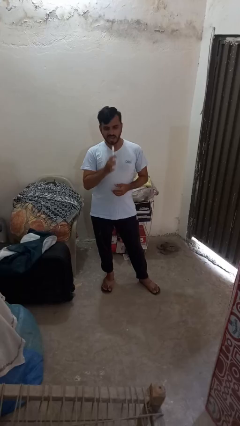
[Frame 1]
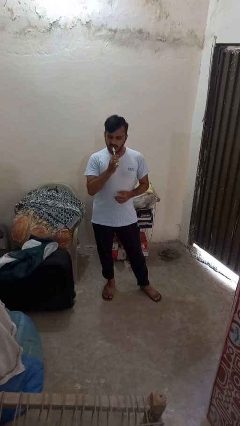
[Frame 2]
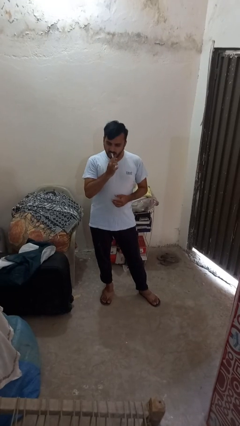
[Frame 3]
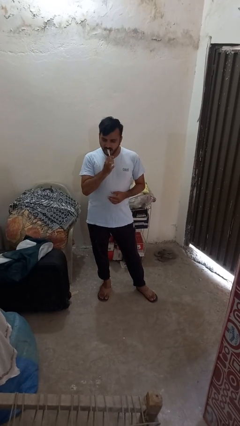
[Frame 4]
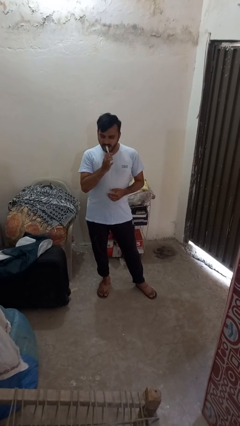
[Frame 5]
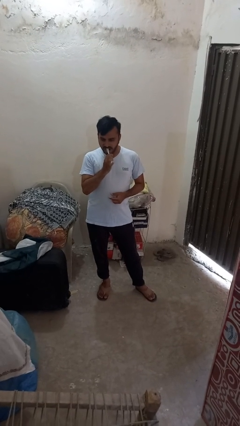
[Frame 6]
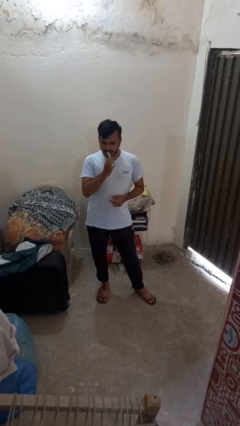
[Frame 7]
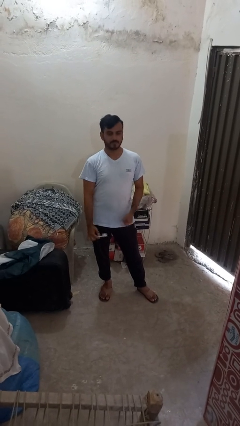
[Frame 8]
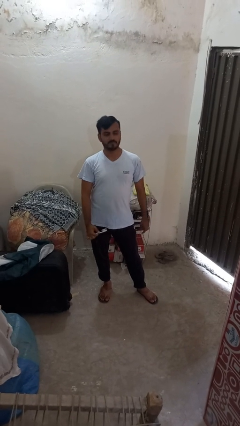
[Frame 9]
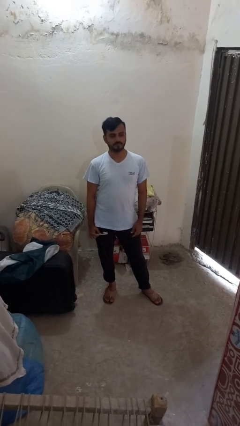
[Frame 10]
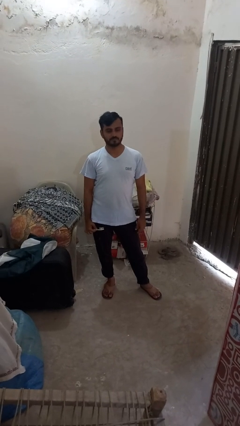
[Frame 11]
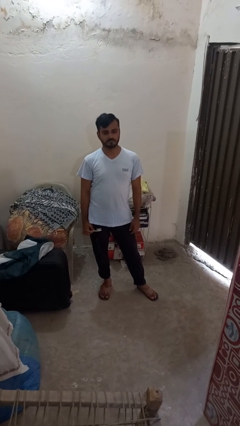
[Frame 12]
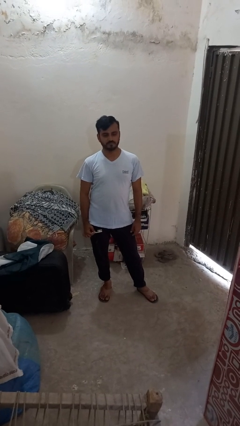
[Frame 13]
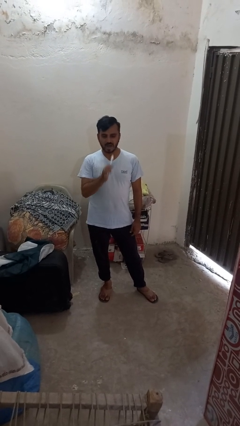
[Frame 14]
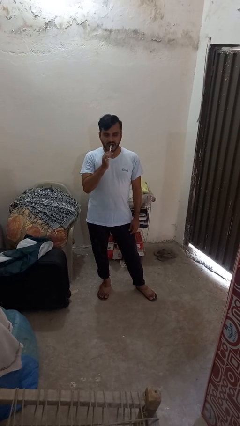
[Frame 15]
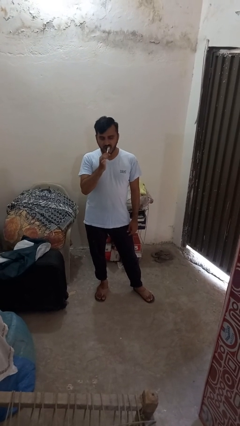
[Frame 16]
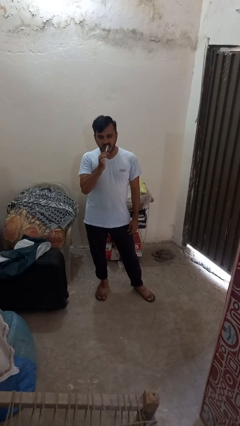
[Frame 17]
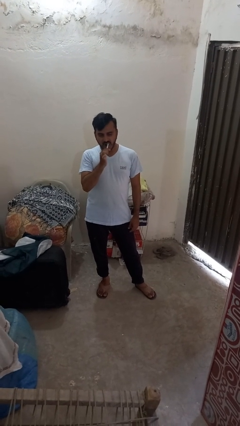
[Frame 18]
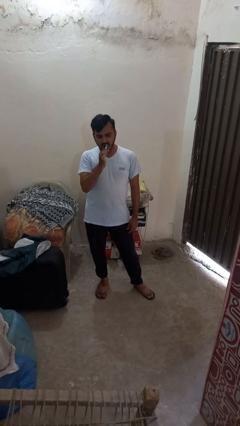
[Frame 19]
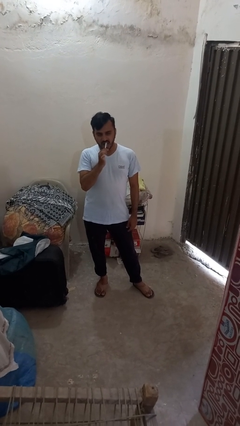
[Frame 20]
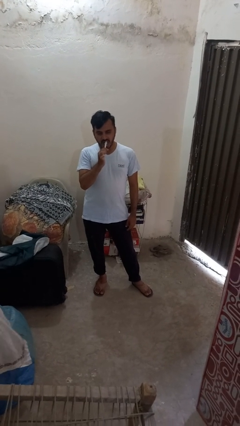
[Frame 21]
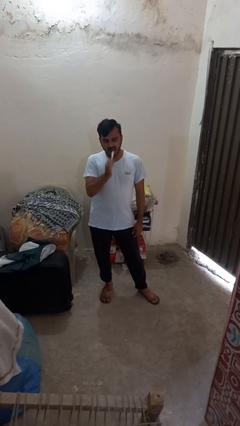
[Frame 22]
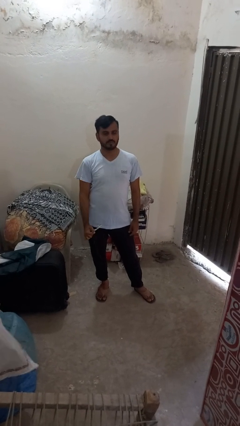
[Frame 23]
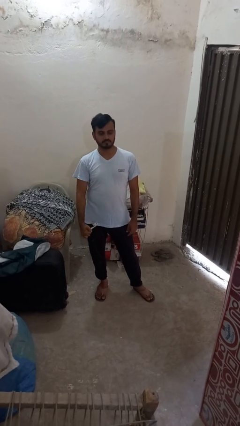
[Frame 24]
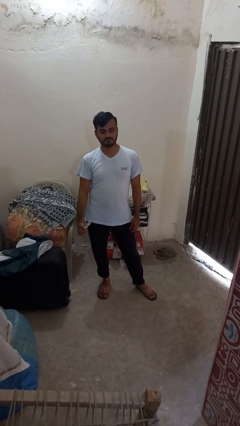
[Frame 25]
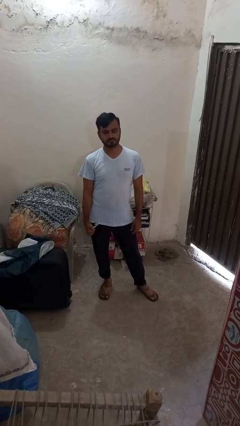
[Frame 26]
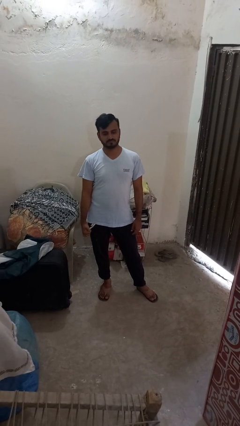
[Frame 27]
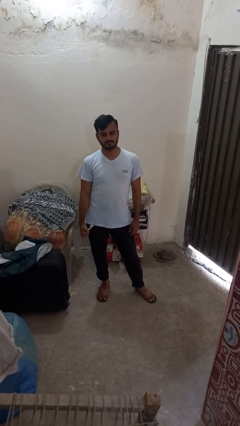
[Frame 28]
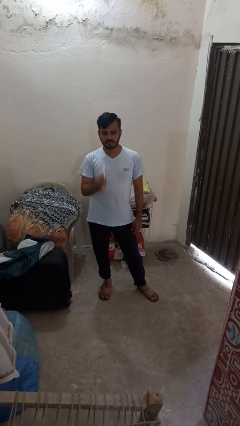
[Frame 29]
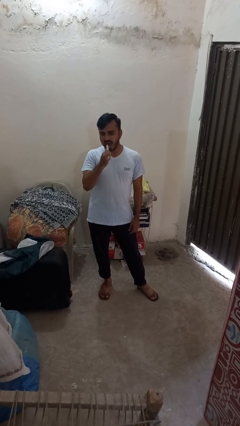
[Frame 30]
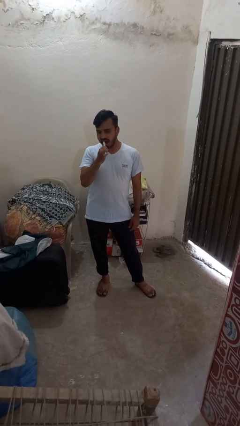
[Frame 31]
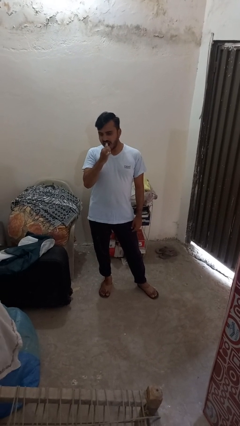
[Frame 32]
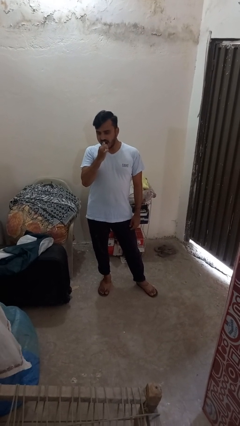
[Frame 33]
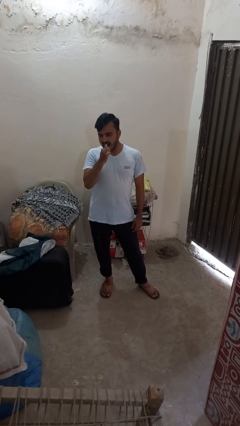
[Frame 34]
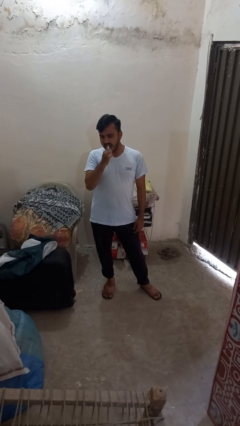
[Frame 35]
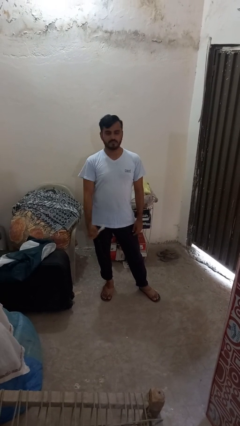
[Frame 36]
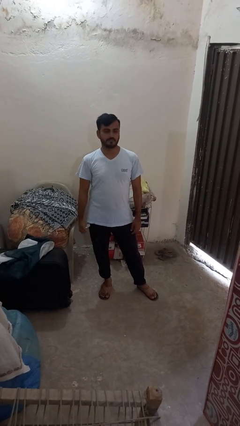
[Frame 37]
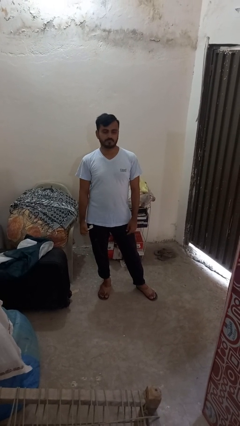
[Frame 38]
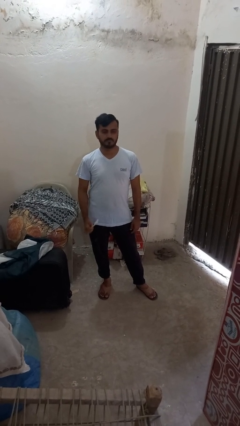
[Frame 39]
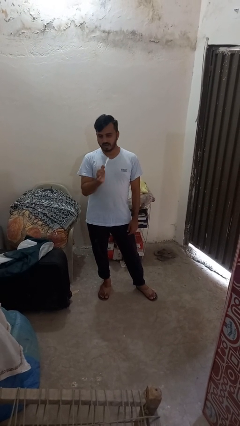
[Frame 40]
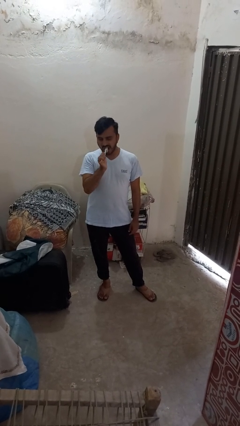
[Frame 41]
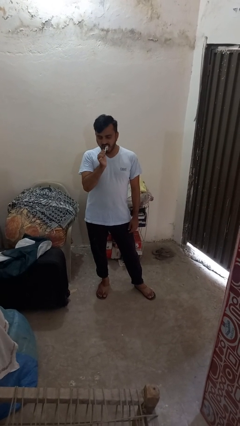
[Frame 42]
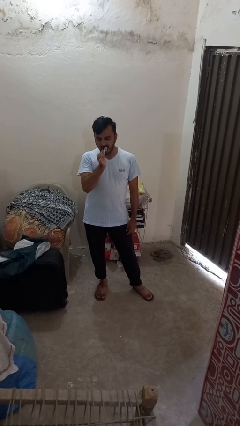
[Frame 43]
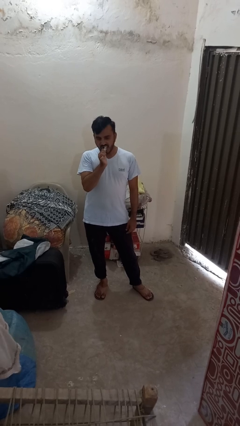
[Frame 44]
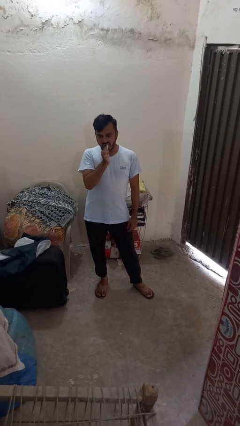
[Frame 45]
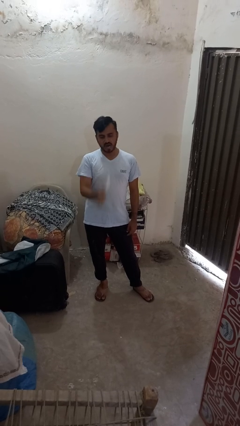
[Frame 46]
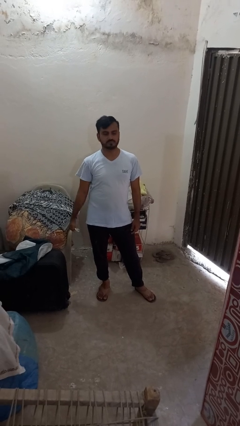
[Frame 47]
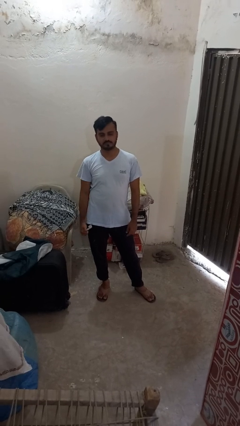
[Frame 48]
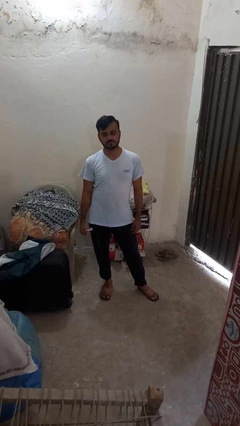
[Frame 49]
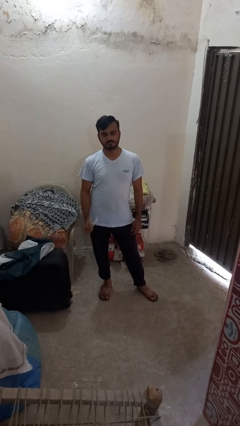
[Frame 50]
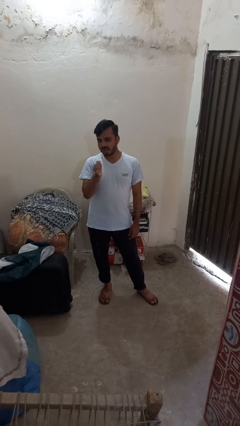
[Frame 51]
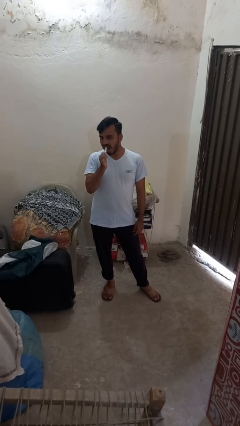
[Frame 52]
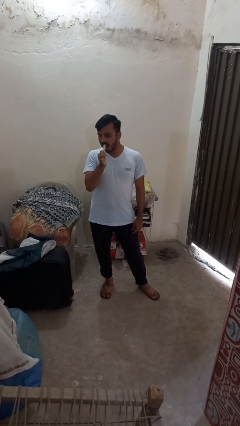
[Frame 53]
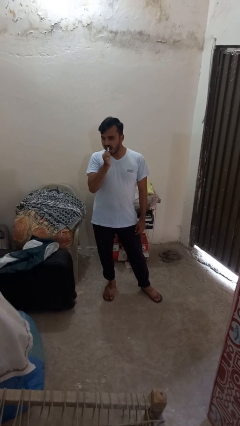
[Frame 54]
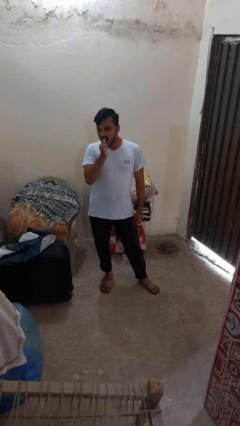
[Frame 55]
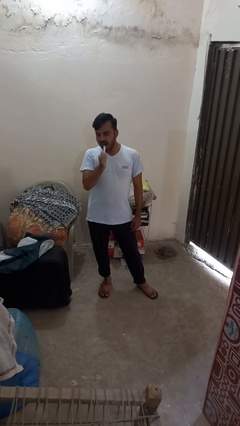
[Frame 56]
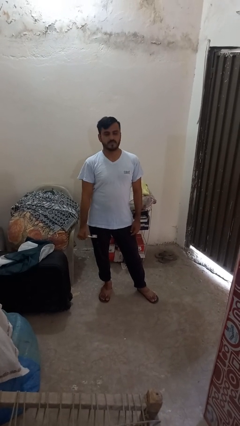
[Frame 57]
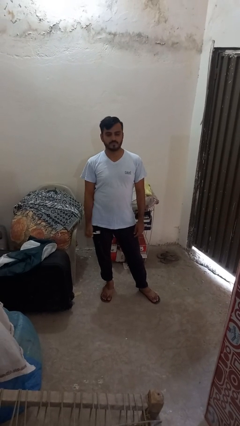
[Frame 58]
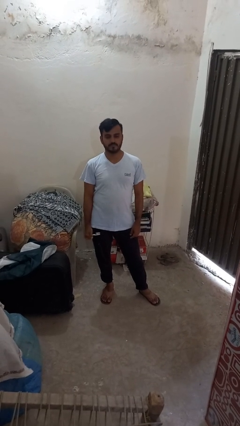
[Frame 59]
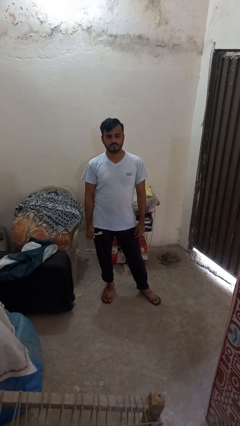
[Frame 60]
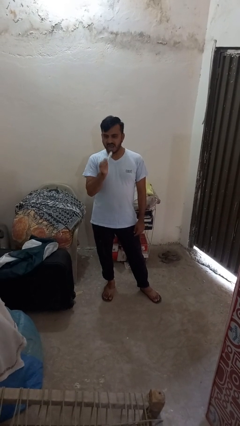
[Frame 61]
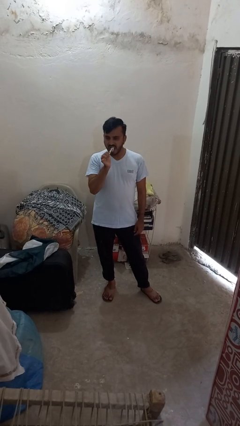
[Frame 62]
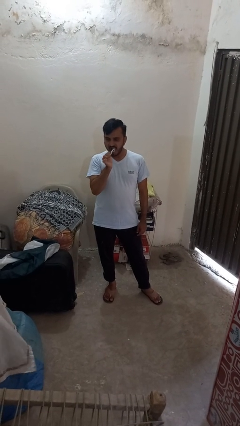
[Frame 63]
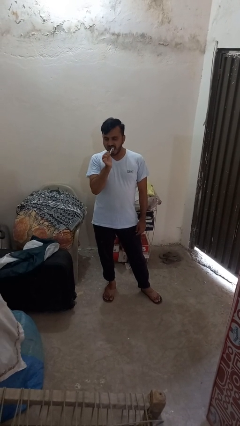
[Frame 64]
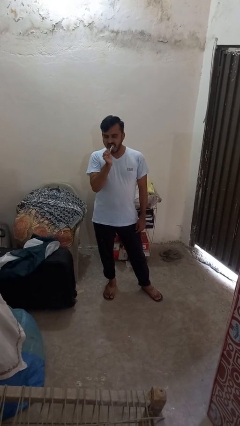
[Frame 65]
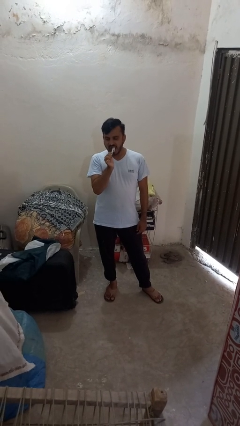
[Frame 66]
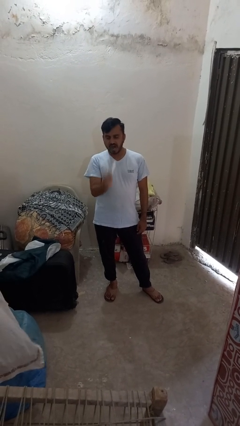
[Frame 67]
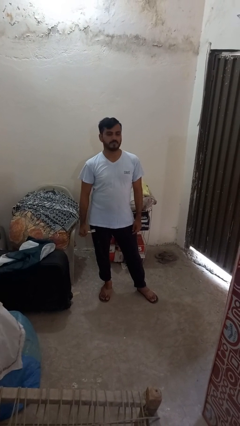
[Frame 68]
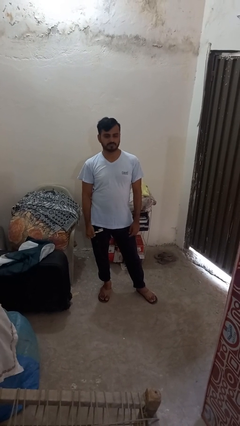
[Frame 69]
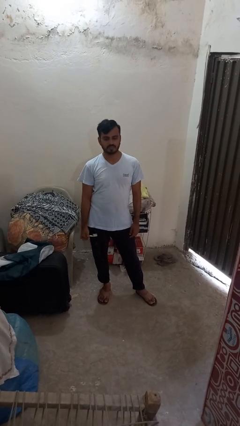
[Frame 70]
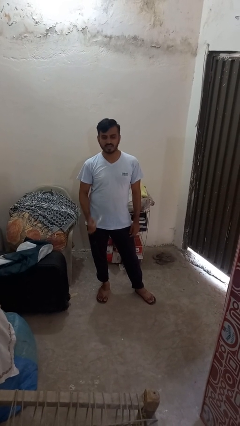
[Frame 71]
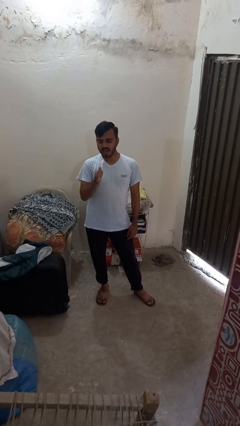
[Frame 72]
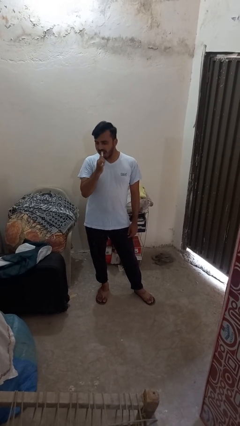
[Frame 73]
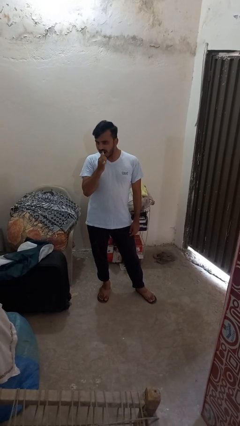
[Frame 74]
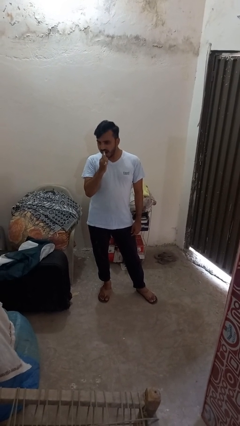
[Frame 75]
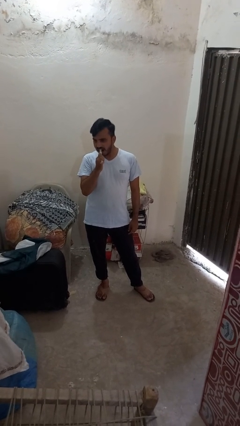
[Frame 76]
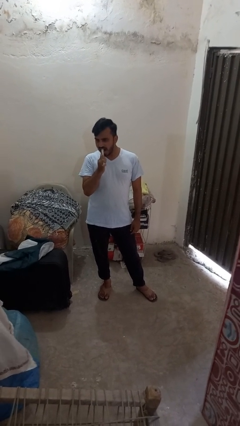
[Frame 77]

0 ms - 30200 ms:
person brushes teeth

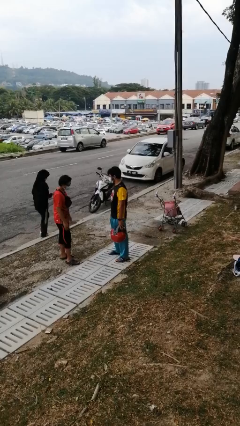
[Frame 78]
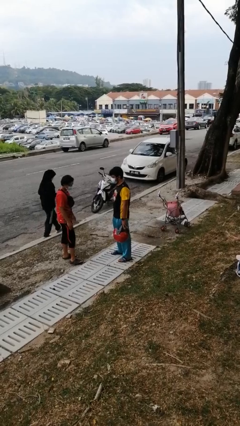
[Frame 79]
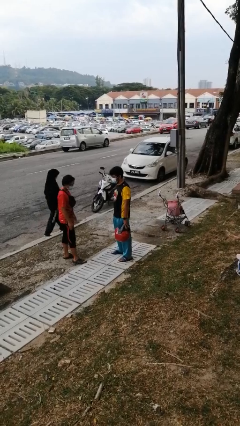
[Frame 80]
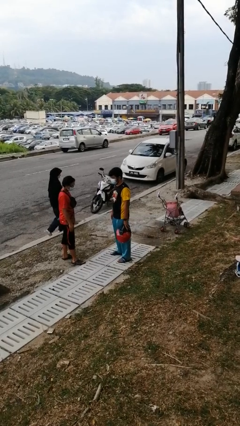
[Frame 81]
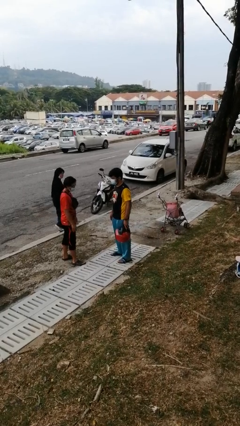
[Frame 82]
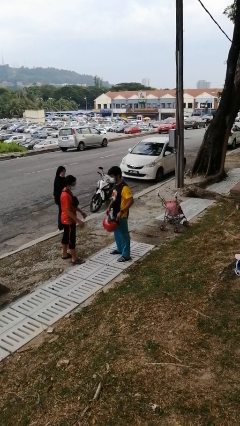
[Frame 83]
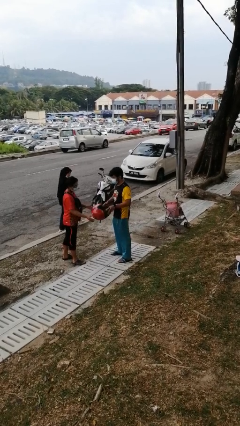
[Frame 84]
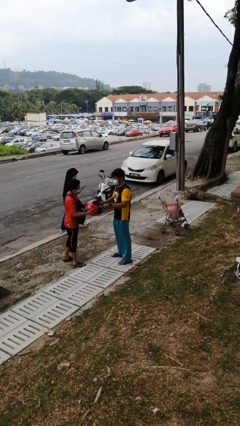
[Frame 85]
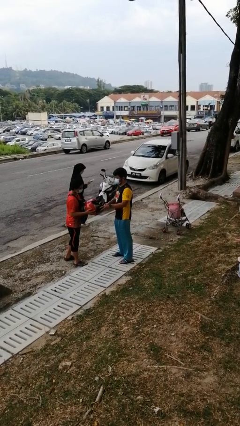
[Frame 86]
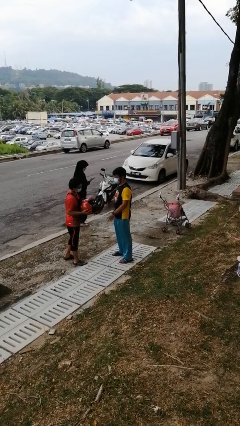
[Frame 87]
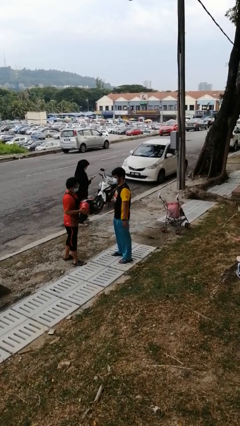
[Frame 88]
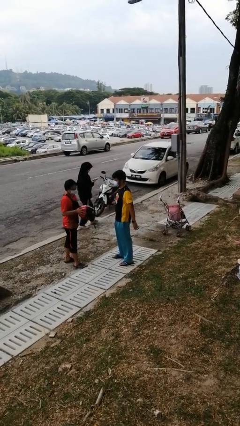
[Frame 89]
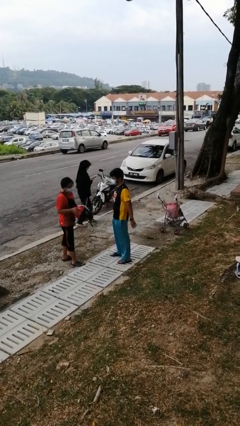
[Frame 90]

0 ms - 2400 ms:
person transfers object to person

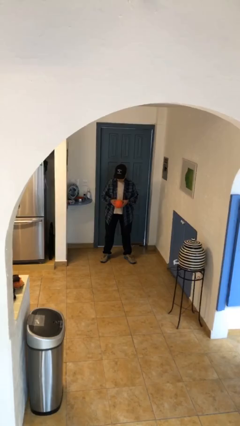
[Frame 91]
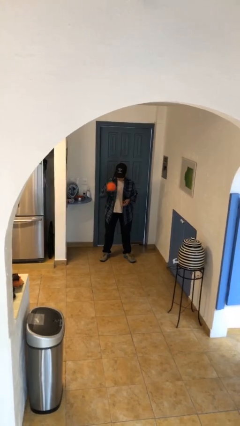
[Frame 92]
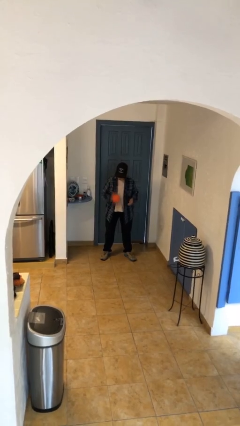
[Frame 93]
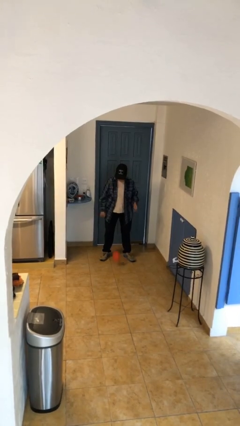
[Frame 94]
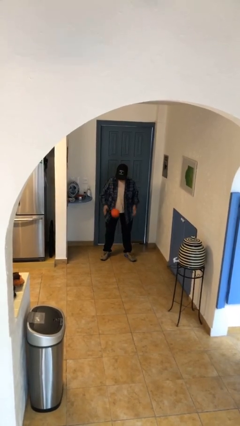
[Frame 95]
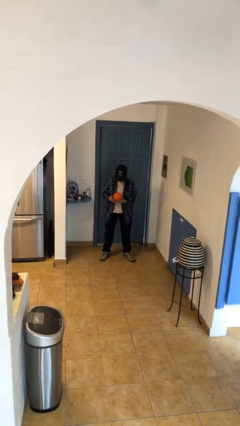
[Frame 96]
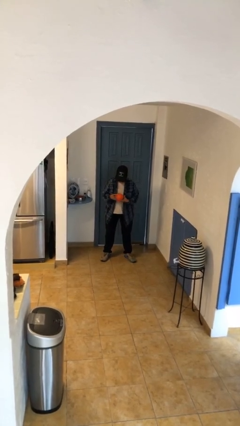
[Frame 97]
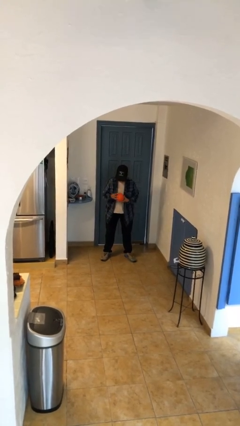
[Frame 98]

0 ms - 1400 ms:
person bounces ball on floor
